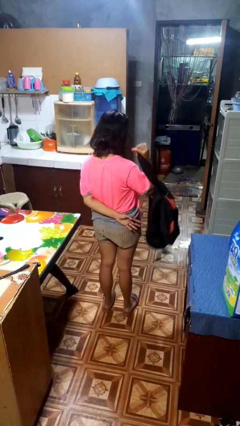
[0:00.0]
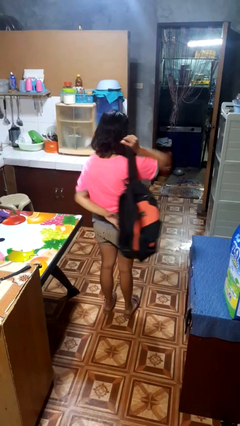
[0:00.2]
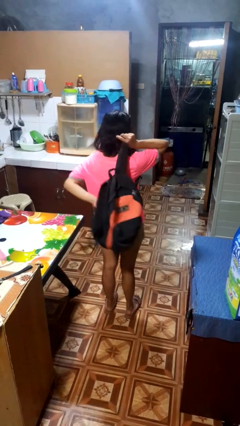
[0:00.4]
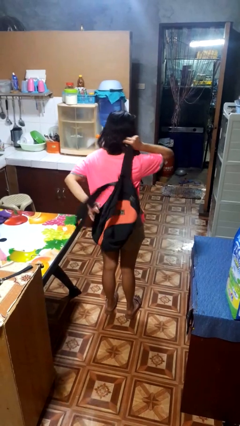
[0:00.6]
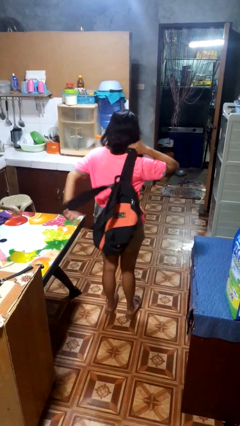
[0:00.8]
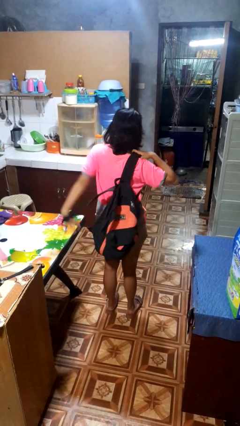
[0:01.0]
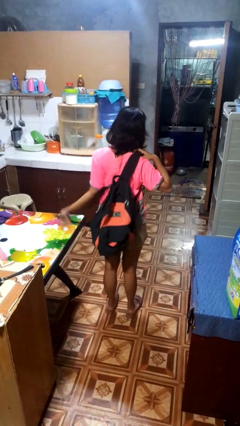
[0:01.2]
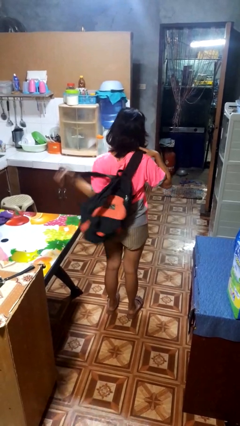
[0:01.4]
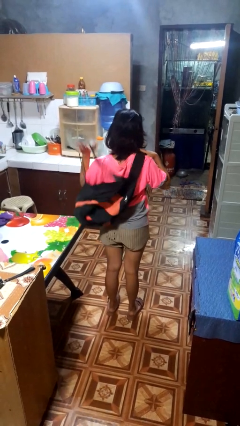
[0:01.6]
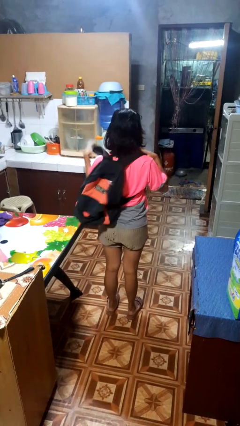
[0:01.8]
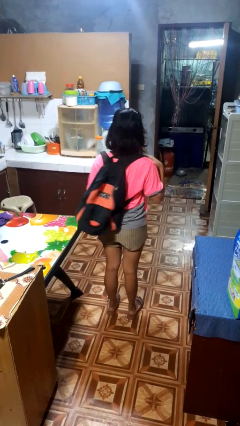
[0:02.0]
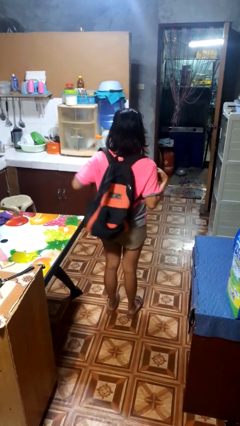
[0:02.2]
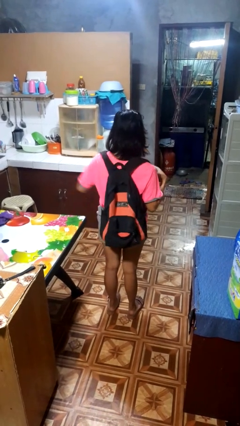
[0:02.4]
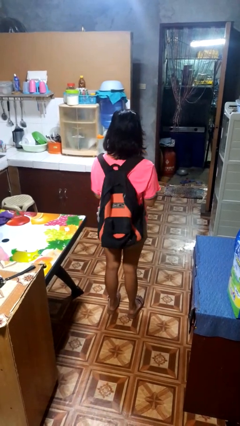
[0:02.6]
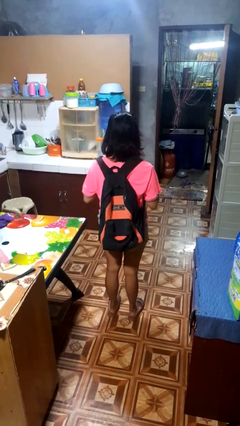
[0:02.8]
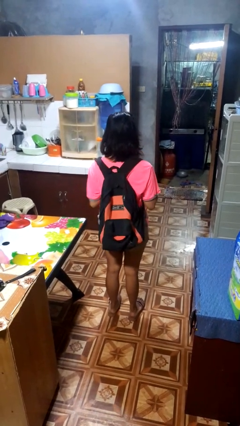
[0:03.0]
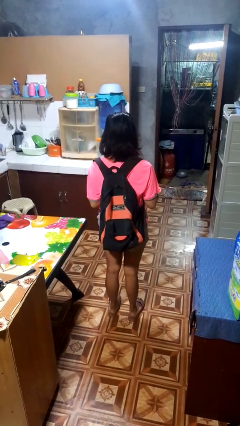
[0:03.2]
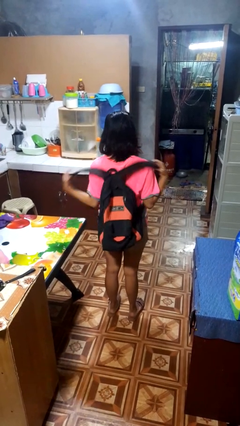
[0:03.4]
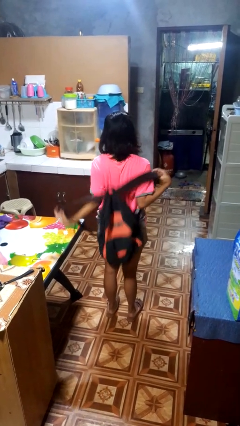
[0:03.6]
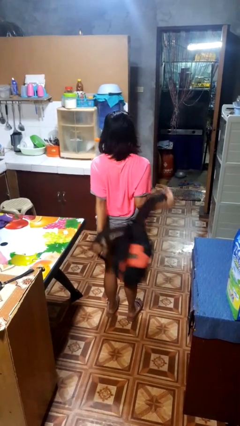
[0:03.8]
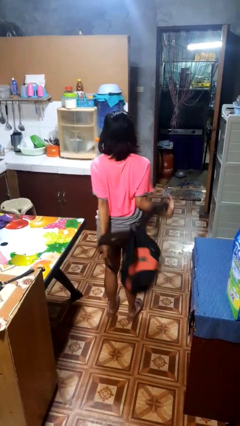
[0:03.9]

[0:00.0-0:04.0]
person puts on backpack

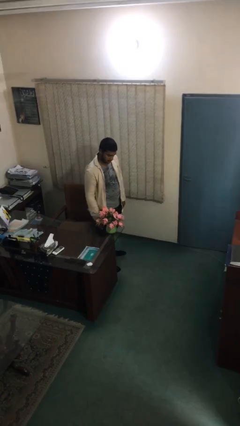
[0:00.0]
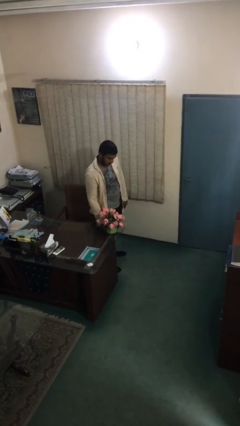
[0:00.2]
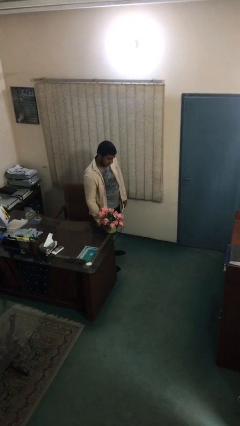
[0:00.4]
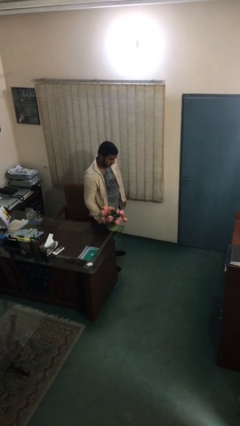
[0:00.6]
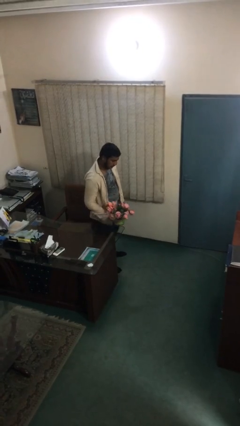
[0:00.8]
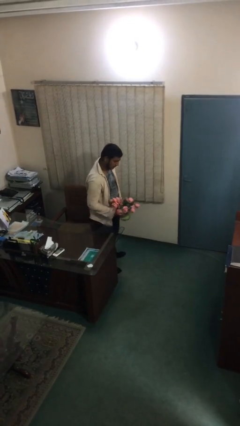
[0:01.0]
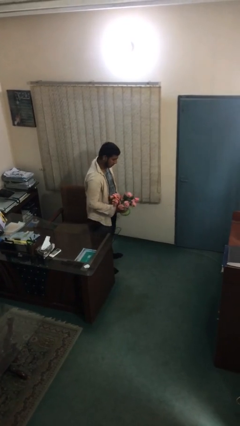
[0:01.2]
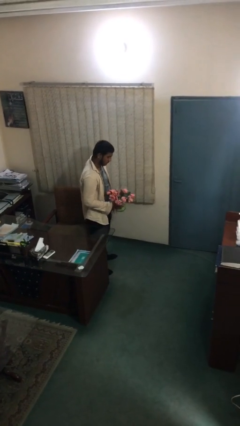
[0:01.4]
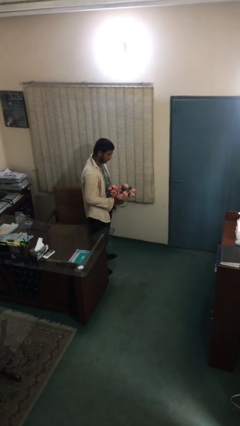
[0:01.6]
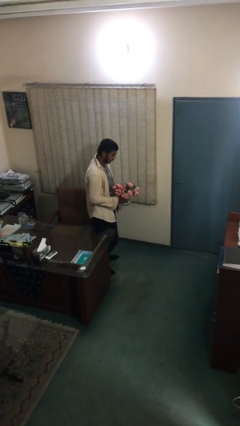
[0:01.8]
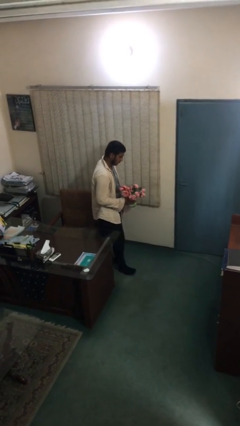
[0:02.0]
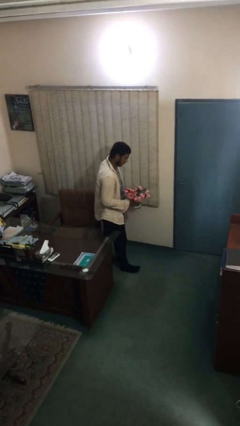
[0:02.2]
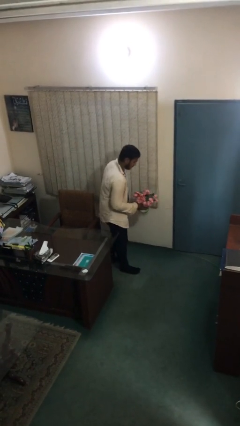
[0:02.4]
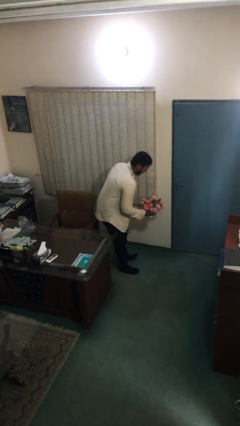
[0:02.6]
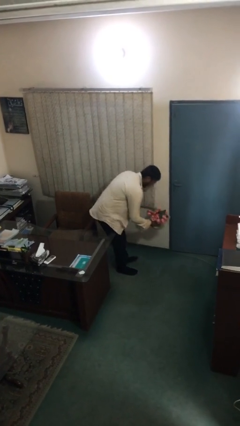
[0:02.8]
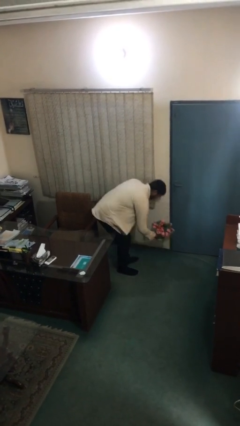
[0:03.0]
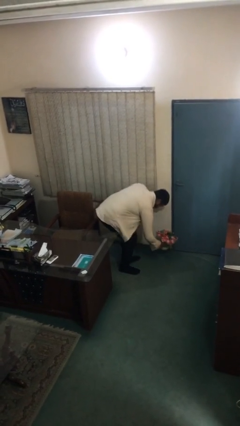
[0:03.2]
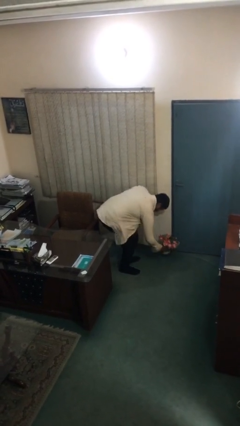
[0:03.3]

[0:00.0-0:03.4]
person picks up object from table

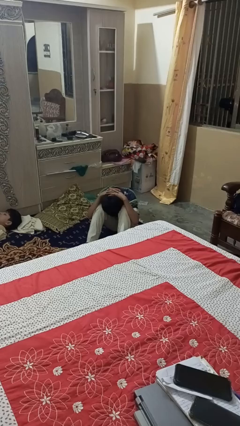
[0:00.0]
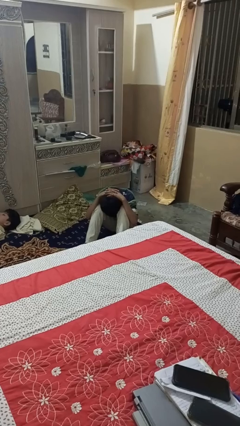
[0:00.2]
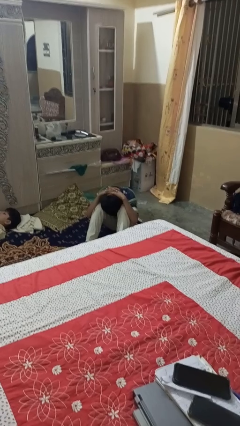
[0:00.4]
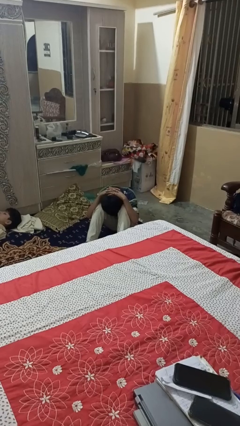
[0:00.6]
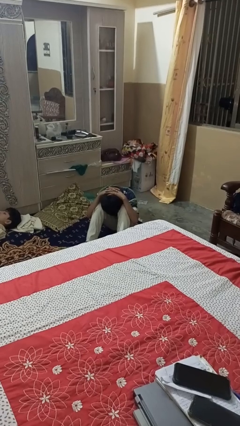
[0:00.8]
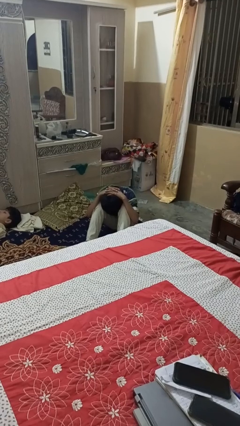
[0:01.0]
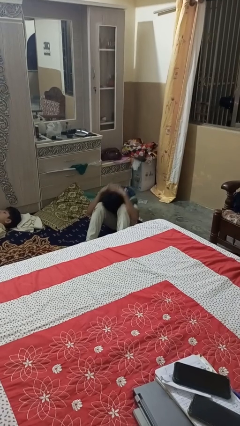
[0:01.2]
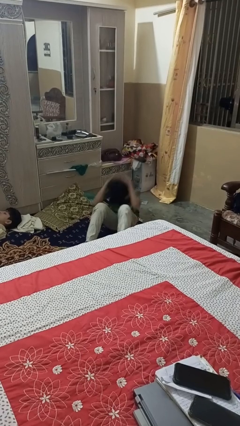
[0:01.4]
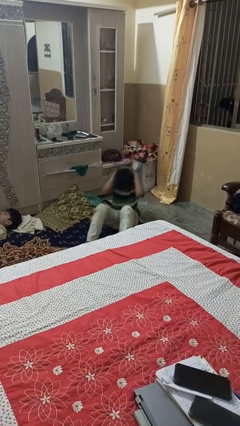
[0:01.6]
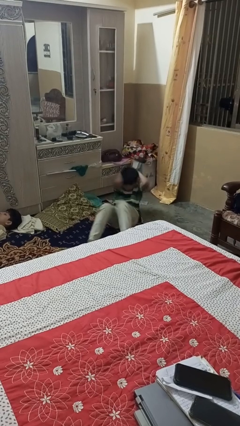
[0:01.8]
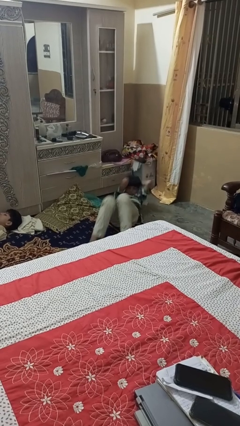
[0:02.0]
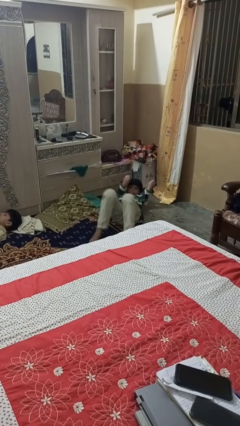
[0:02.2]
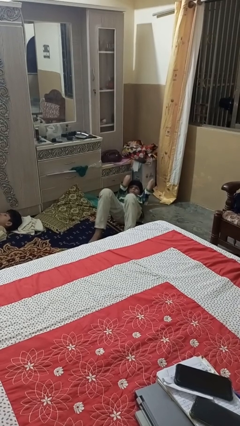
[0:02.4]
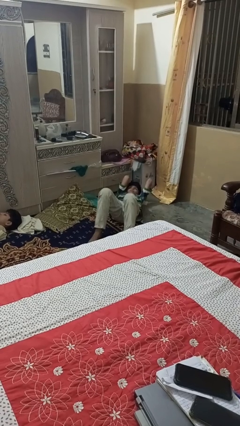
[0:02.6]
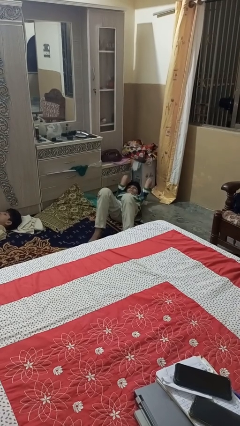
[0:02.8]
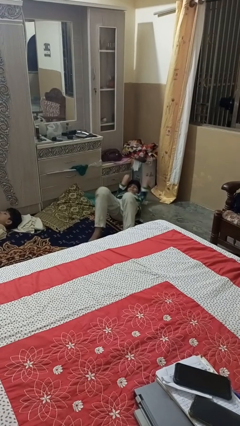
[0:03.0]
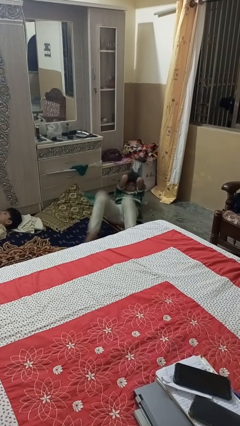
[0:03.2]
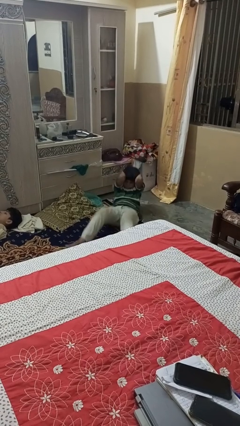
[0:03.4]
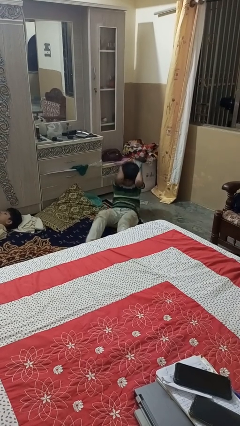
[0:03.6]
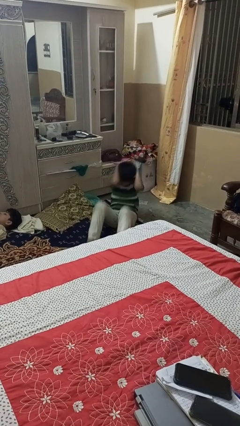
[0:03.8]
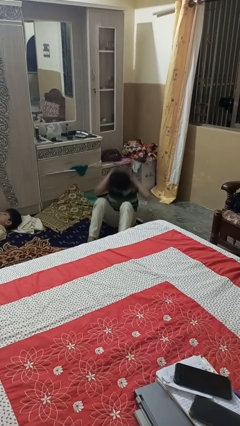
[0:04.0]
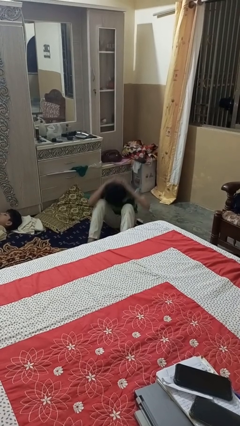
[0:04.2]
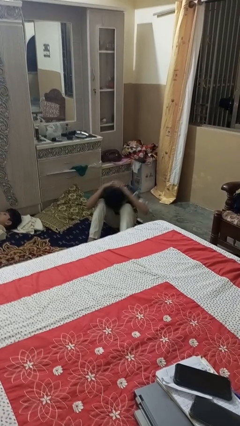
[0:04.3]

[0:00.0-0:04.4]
person exercises with situp

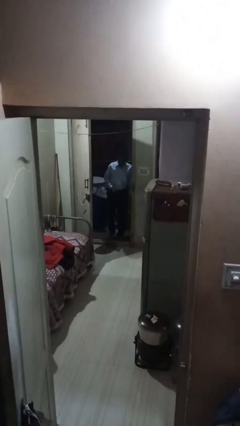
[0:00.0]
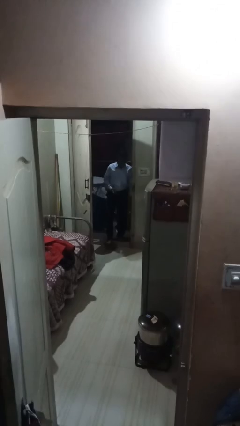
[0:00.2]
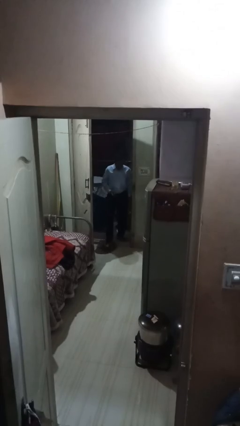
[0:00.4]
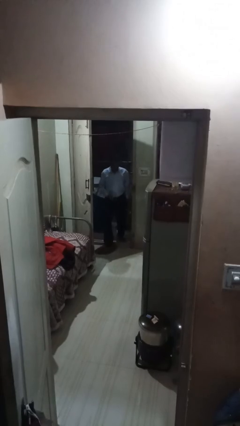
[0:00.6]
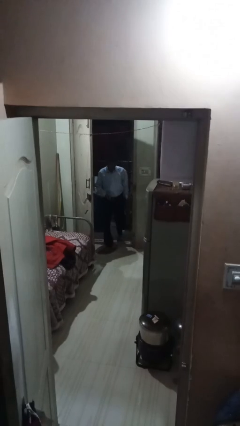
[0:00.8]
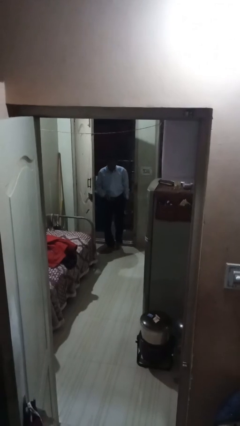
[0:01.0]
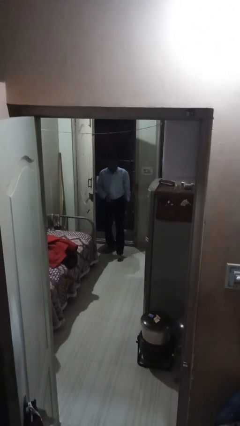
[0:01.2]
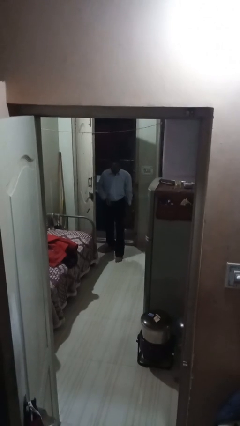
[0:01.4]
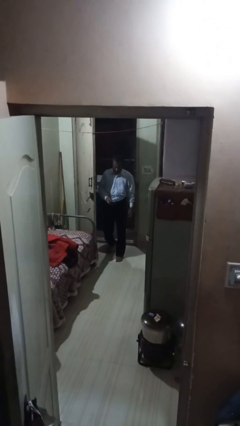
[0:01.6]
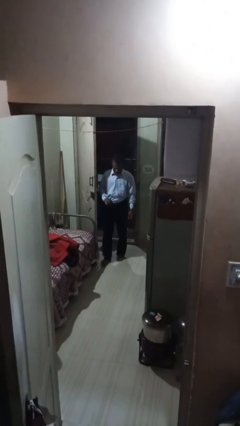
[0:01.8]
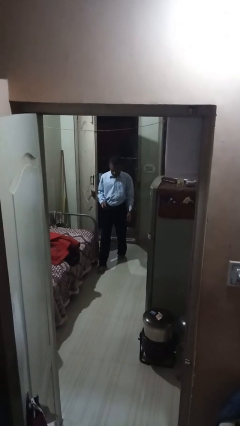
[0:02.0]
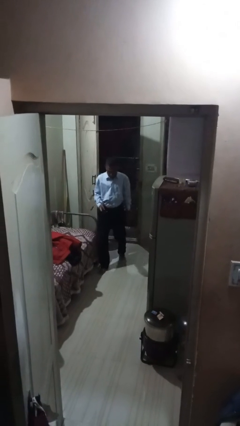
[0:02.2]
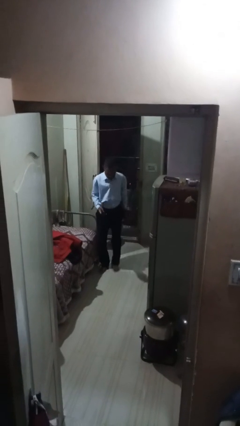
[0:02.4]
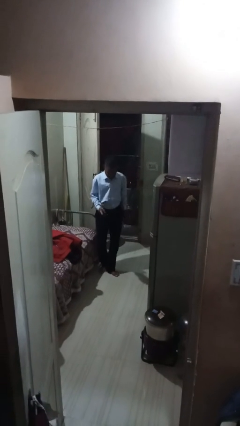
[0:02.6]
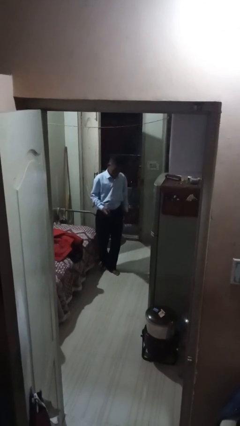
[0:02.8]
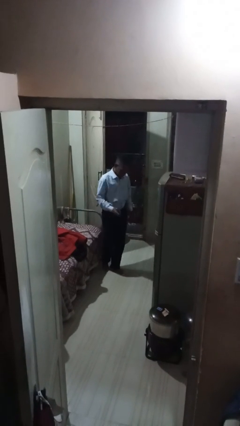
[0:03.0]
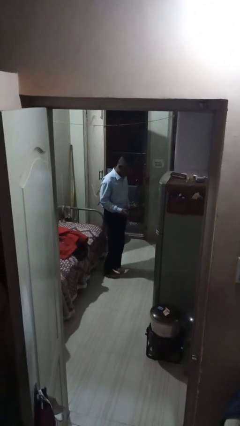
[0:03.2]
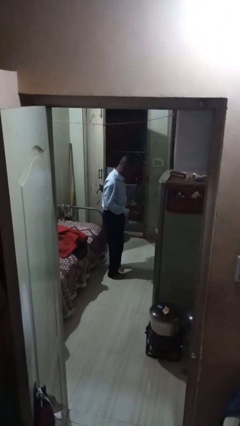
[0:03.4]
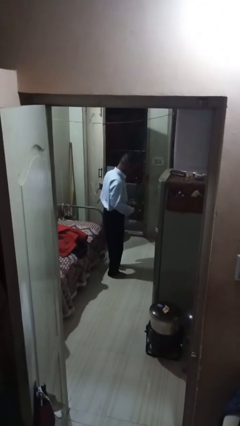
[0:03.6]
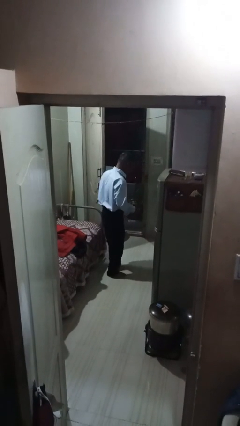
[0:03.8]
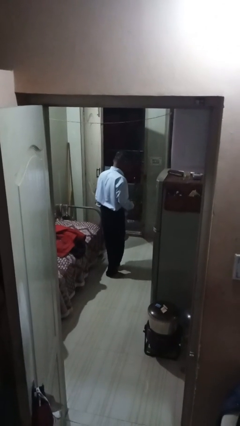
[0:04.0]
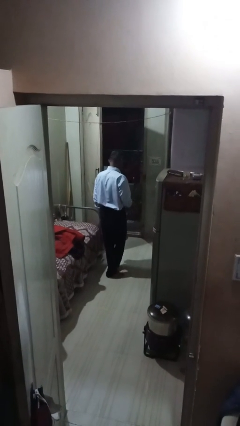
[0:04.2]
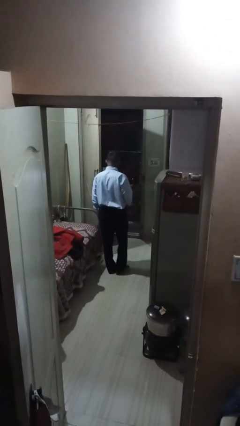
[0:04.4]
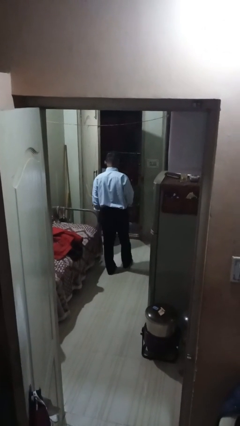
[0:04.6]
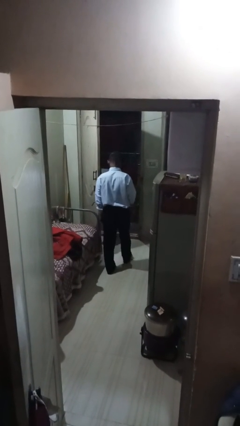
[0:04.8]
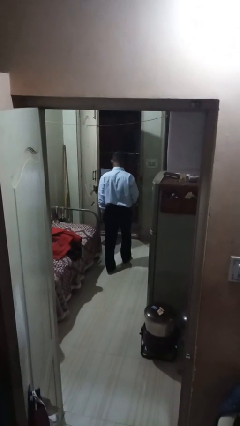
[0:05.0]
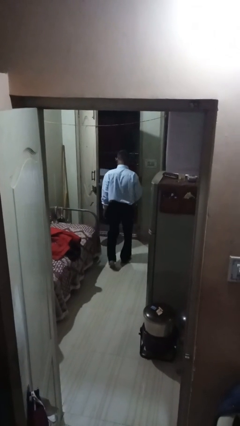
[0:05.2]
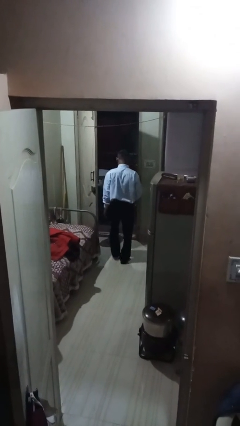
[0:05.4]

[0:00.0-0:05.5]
person enters scene through structure

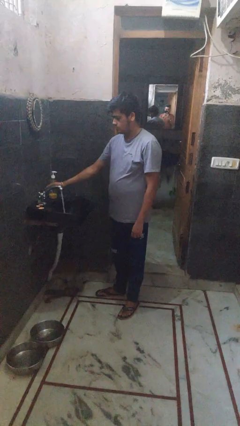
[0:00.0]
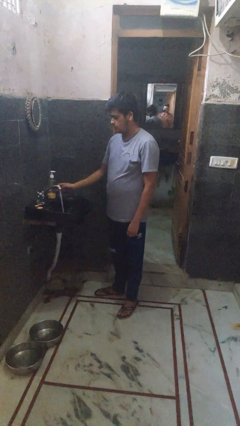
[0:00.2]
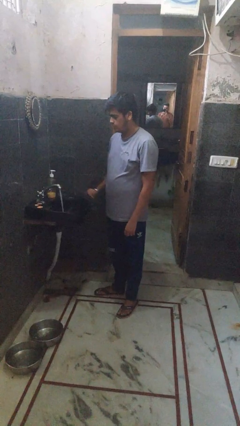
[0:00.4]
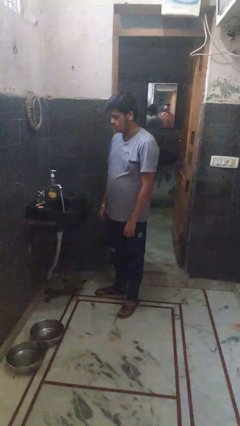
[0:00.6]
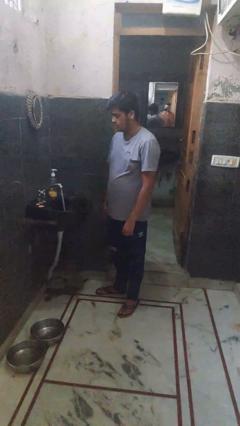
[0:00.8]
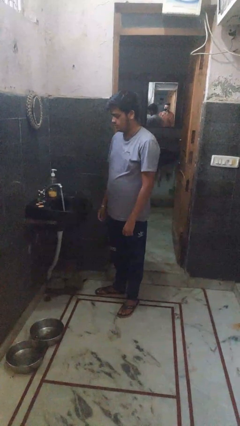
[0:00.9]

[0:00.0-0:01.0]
person turns on faucet
